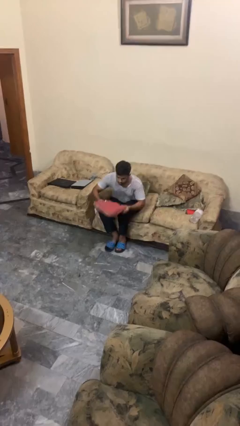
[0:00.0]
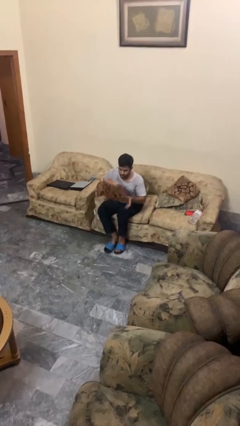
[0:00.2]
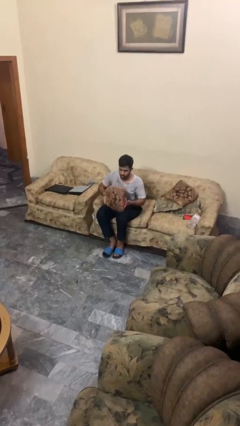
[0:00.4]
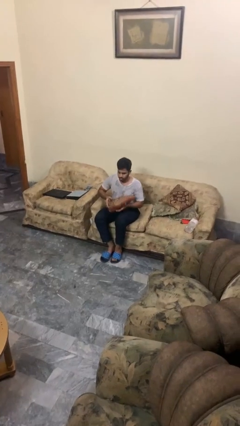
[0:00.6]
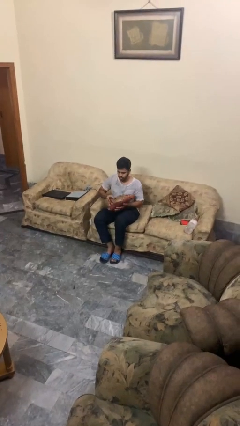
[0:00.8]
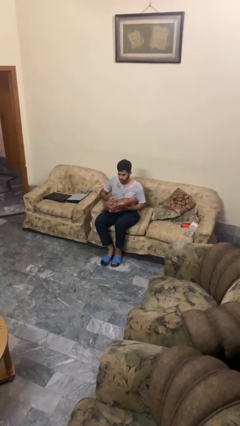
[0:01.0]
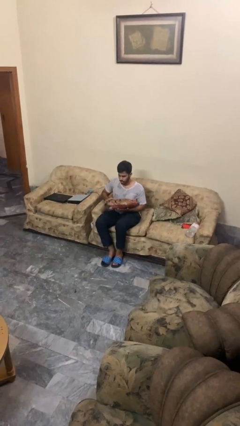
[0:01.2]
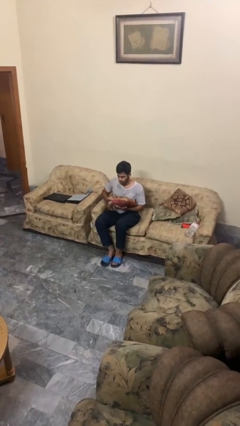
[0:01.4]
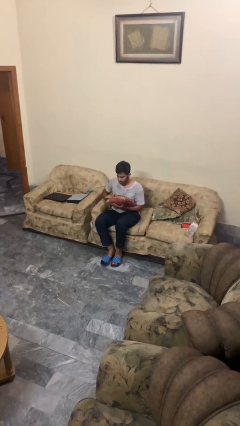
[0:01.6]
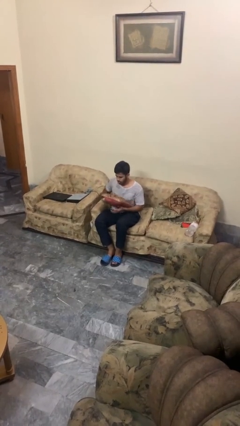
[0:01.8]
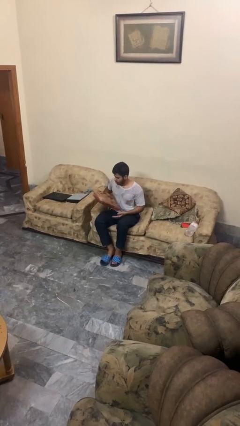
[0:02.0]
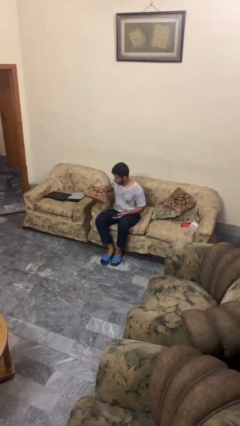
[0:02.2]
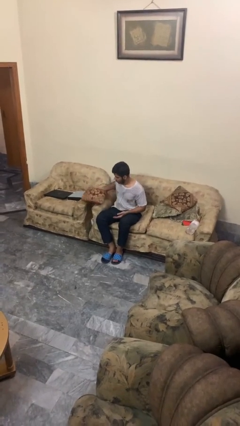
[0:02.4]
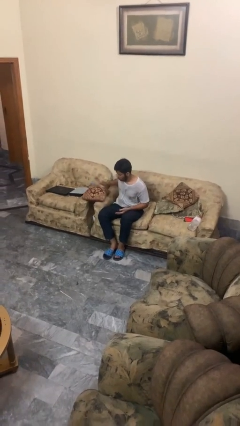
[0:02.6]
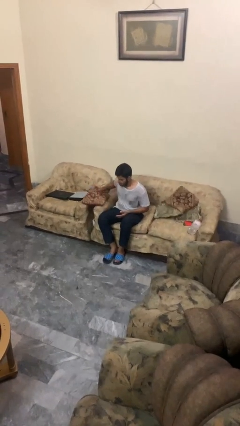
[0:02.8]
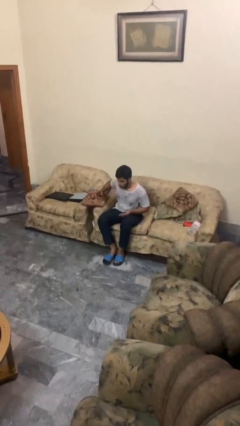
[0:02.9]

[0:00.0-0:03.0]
person picks up object from floor

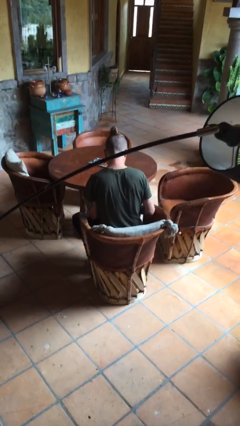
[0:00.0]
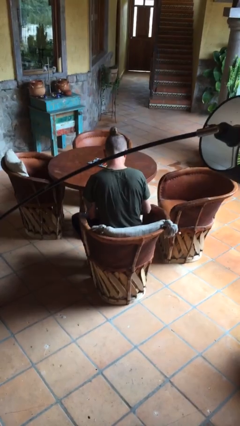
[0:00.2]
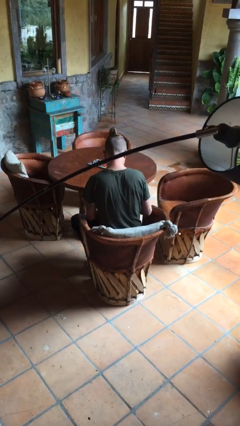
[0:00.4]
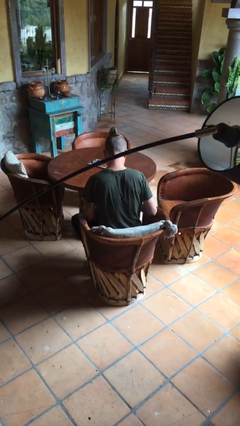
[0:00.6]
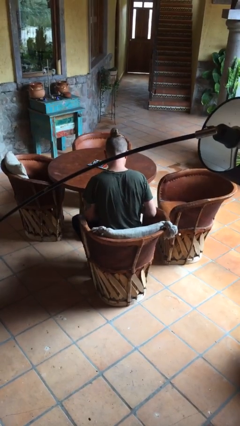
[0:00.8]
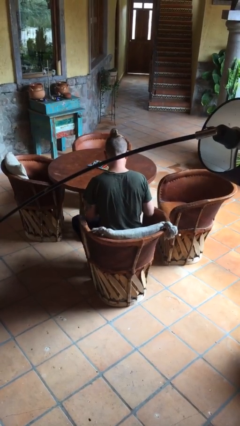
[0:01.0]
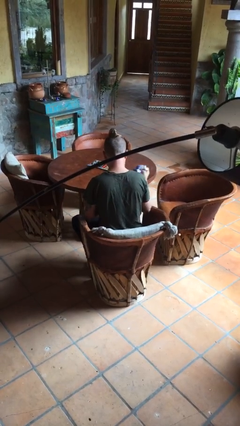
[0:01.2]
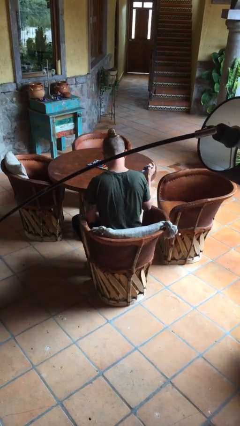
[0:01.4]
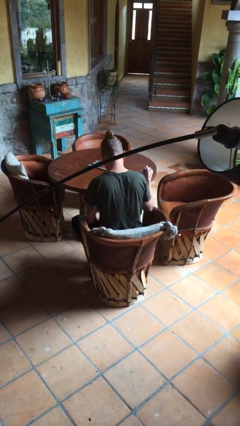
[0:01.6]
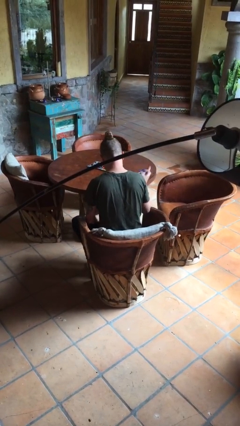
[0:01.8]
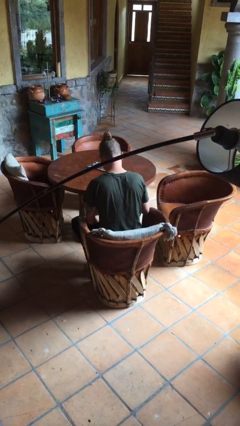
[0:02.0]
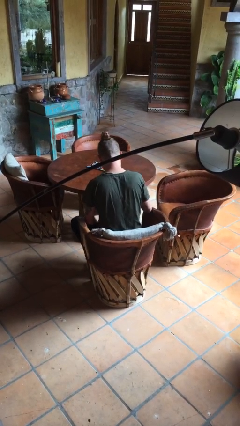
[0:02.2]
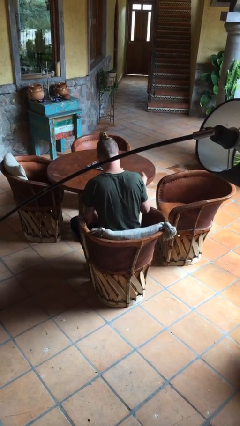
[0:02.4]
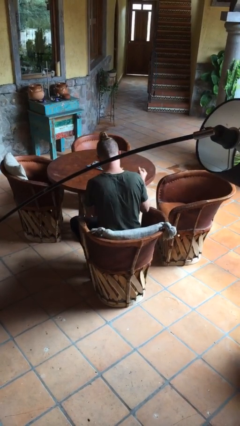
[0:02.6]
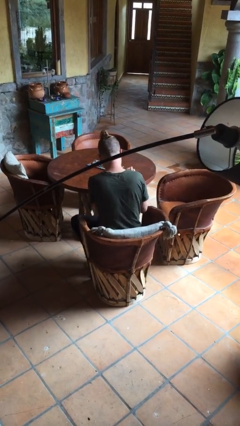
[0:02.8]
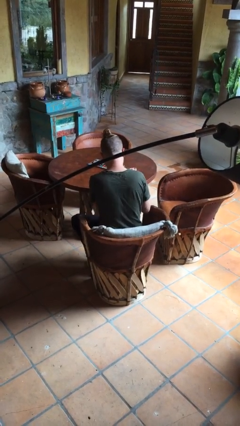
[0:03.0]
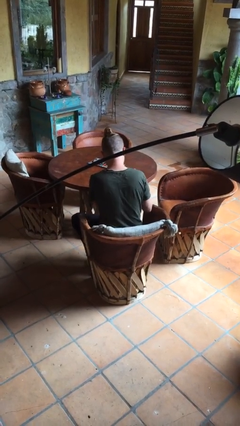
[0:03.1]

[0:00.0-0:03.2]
person crumples paper

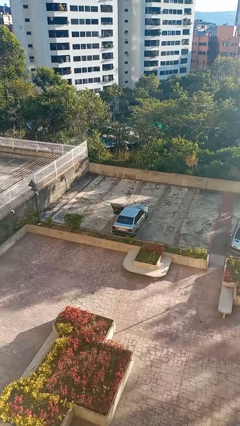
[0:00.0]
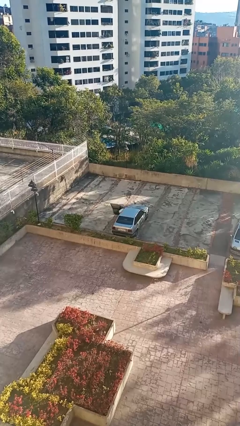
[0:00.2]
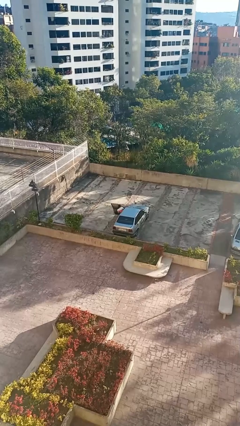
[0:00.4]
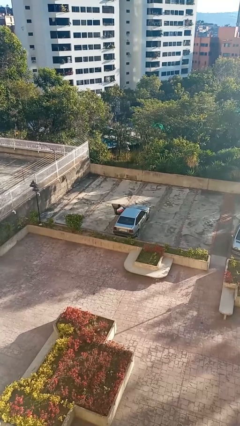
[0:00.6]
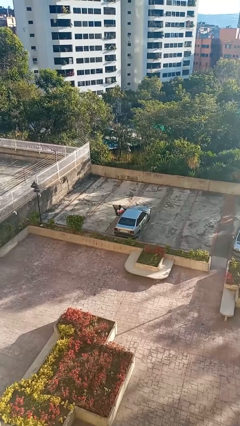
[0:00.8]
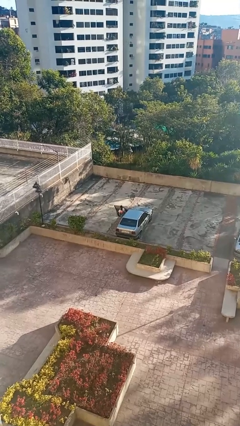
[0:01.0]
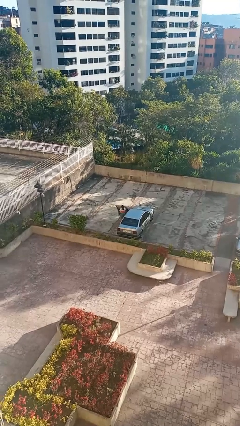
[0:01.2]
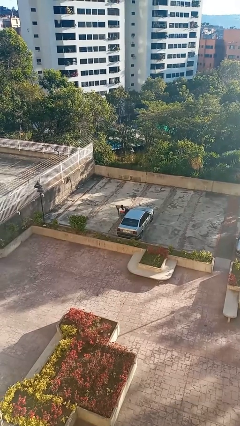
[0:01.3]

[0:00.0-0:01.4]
person exits car

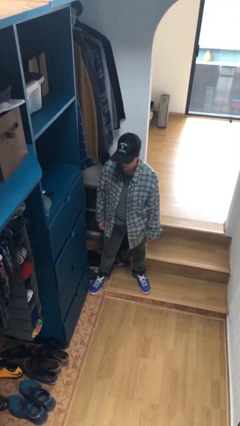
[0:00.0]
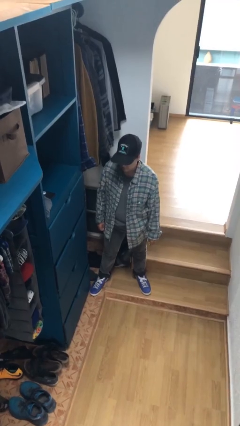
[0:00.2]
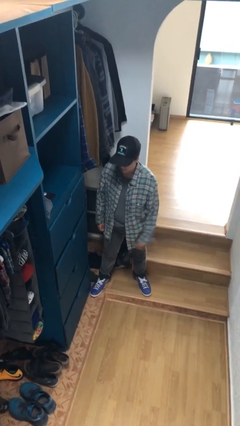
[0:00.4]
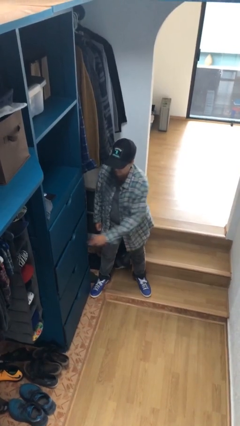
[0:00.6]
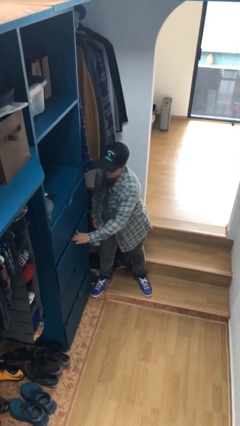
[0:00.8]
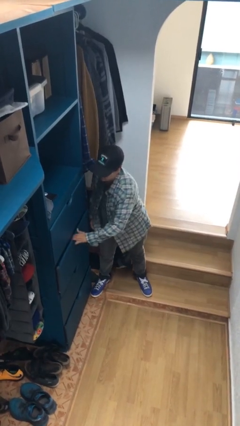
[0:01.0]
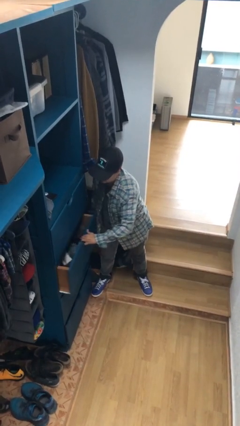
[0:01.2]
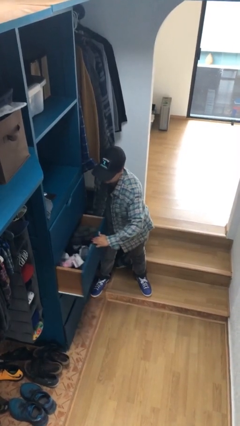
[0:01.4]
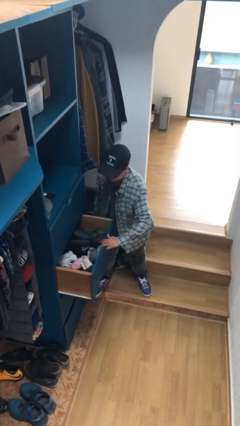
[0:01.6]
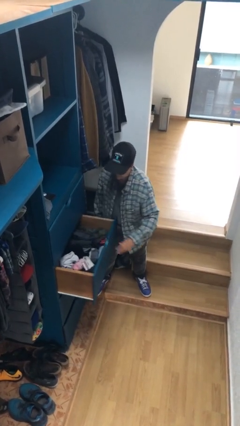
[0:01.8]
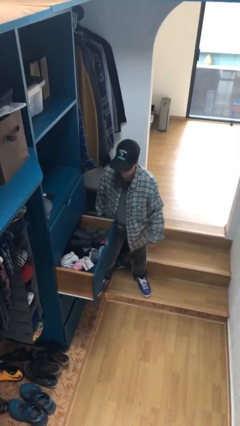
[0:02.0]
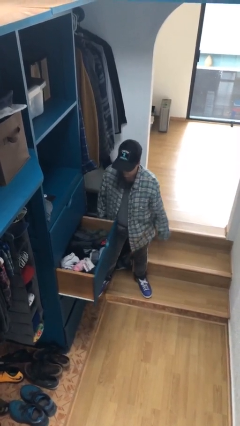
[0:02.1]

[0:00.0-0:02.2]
person opens dresser drawer

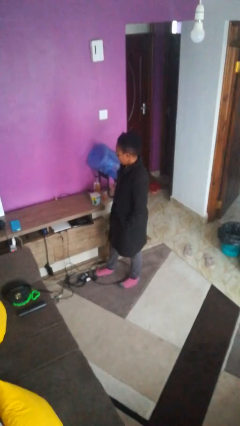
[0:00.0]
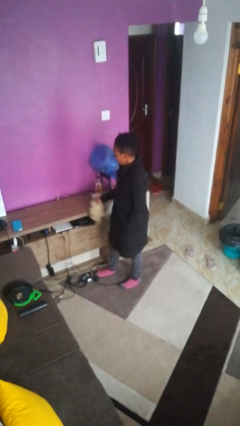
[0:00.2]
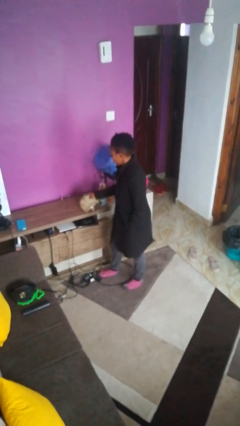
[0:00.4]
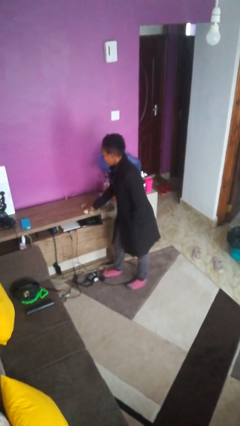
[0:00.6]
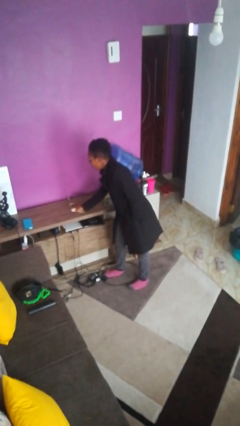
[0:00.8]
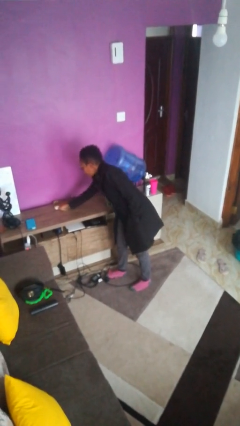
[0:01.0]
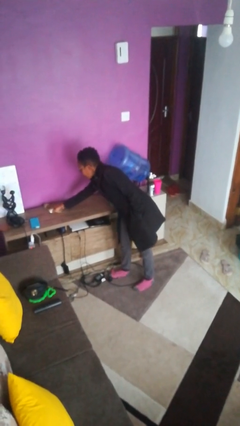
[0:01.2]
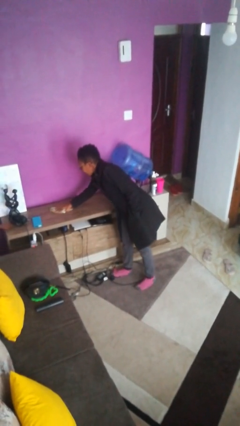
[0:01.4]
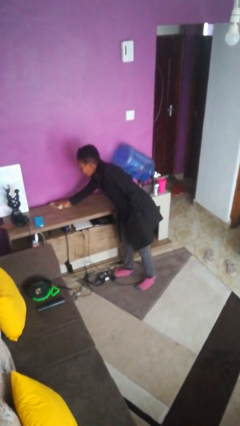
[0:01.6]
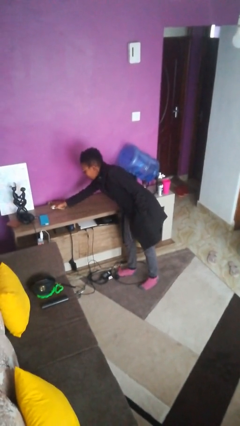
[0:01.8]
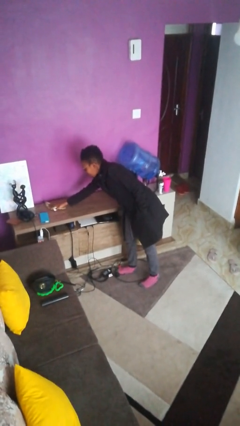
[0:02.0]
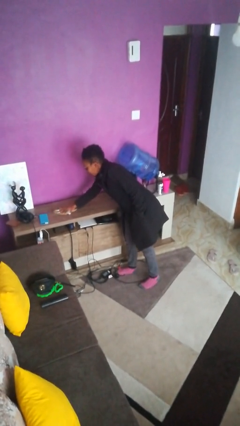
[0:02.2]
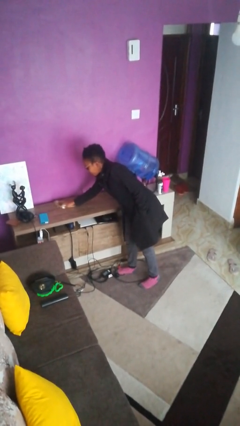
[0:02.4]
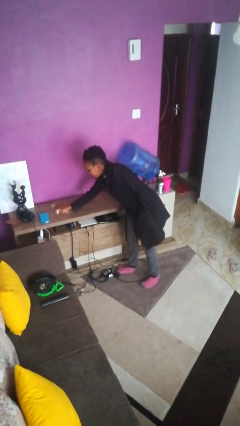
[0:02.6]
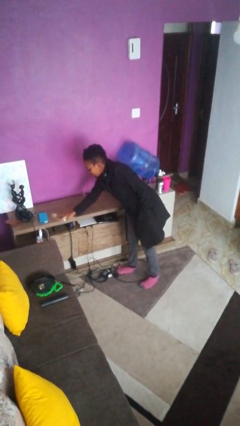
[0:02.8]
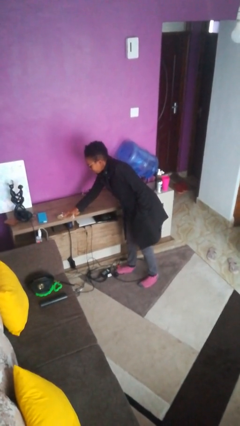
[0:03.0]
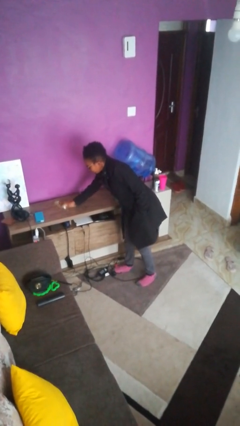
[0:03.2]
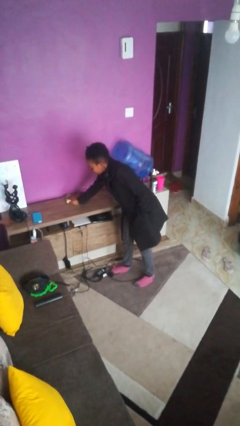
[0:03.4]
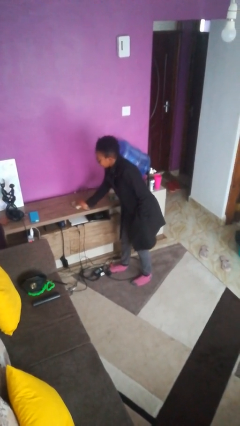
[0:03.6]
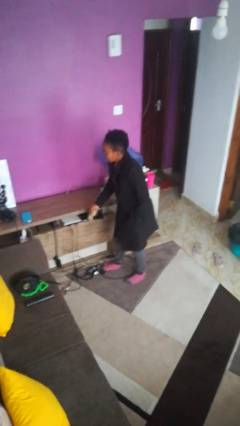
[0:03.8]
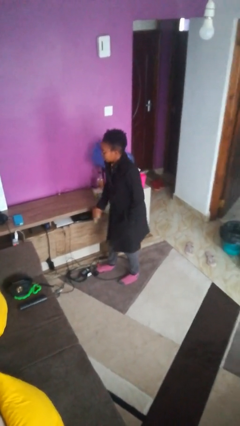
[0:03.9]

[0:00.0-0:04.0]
person cleans table with rag

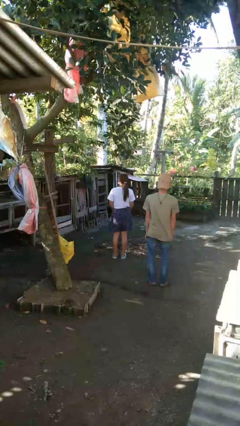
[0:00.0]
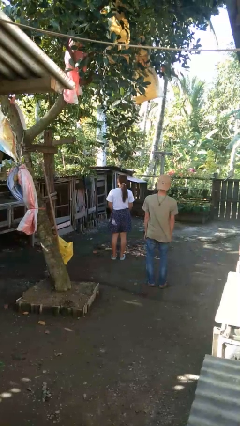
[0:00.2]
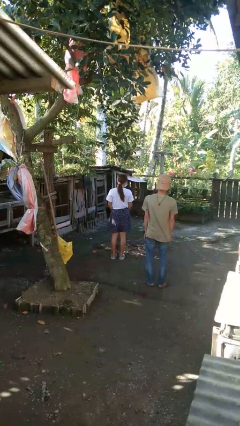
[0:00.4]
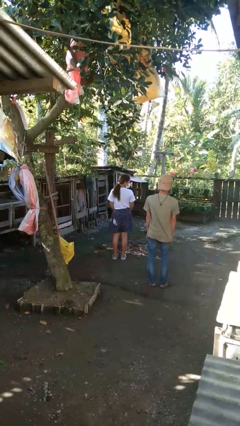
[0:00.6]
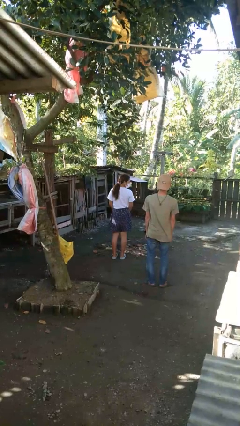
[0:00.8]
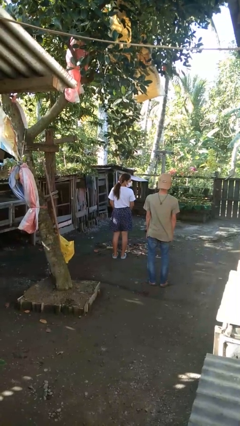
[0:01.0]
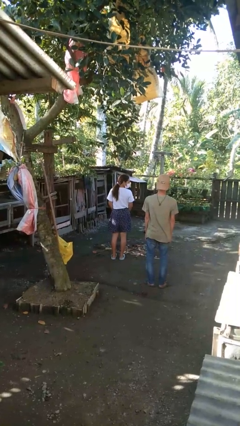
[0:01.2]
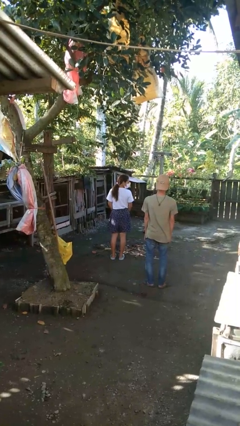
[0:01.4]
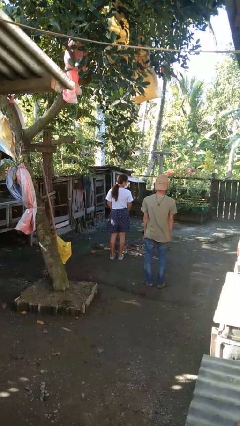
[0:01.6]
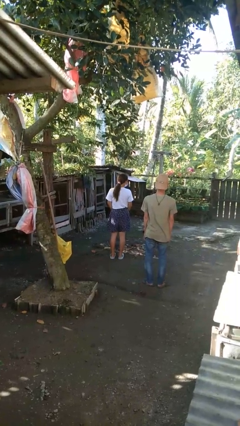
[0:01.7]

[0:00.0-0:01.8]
person looks over shoulder

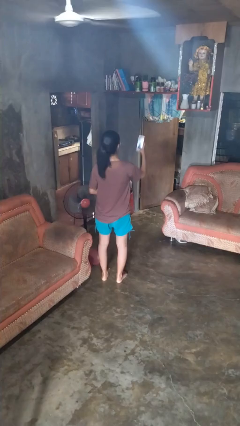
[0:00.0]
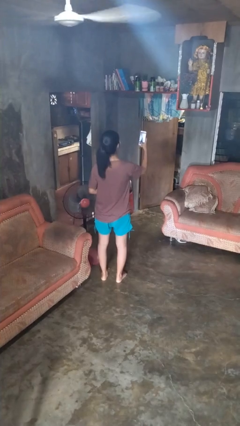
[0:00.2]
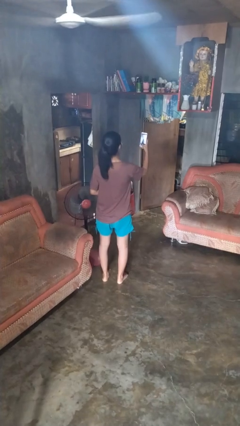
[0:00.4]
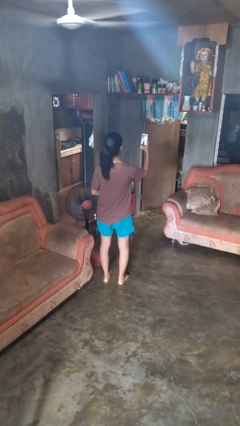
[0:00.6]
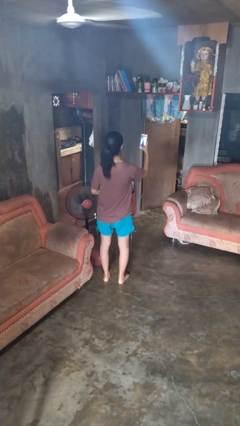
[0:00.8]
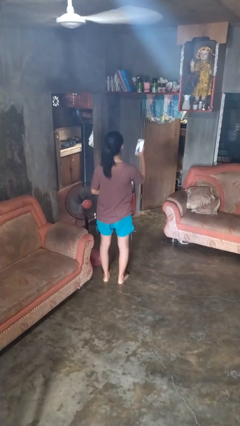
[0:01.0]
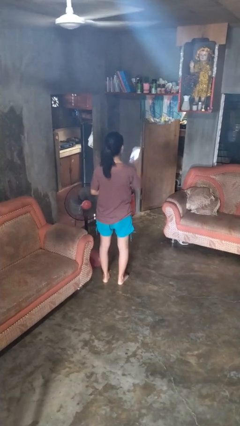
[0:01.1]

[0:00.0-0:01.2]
person takes selfie
